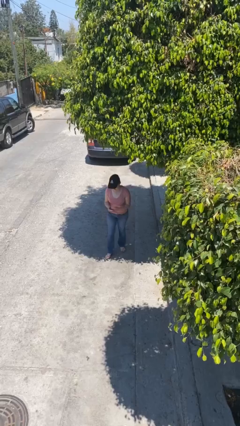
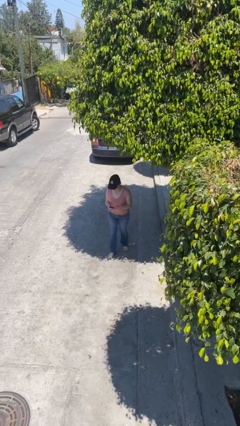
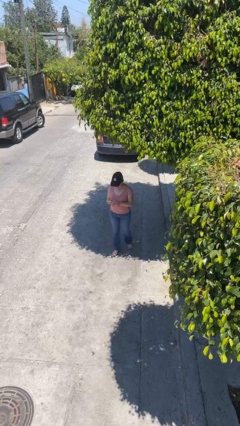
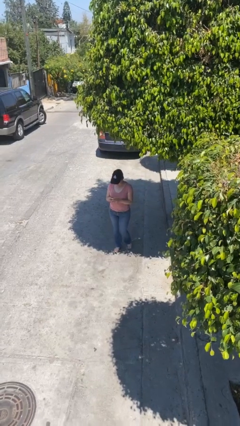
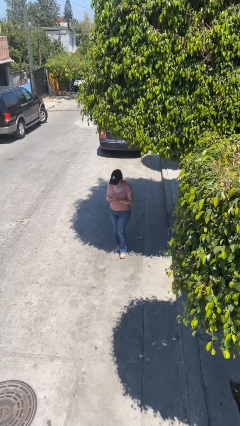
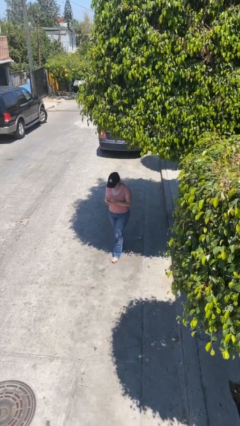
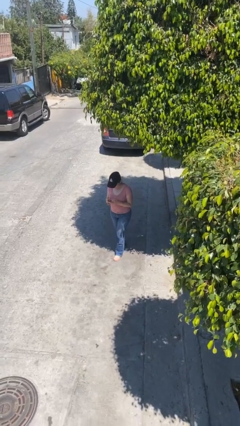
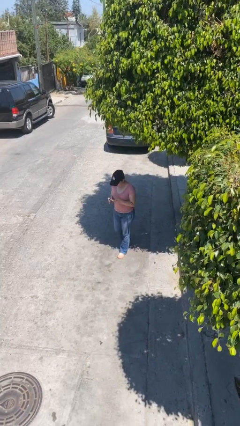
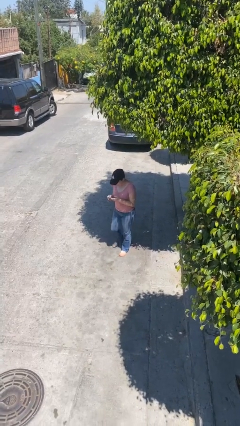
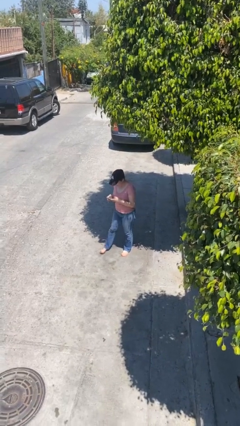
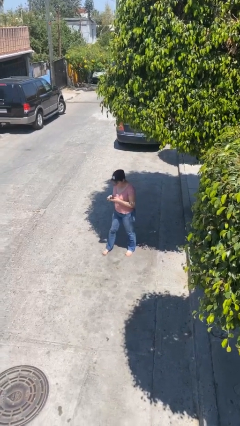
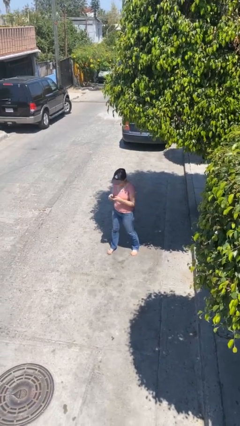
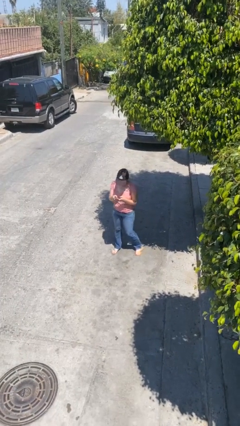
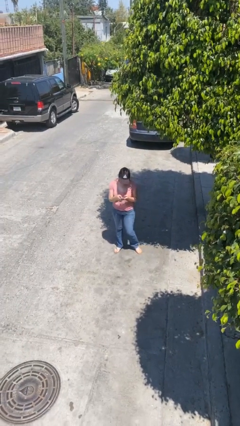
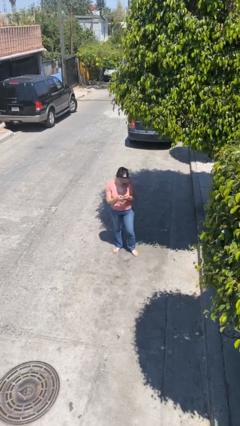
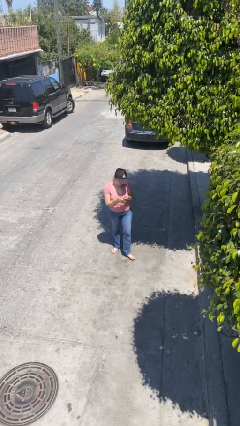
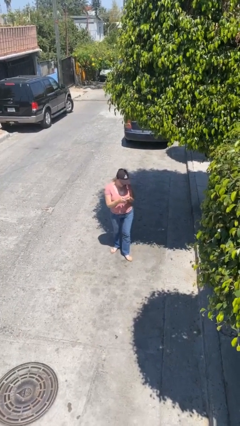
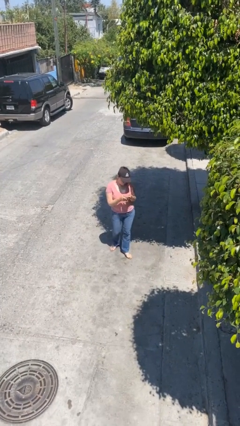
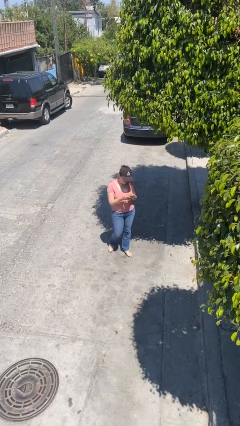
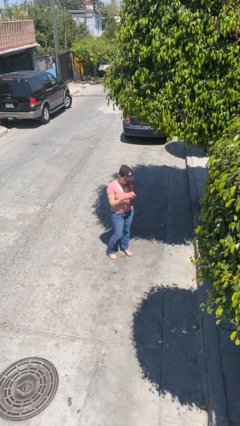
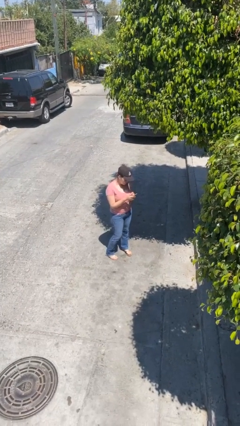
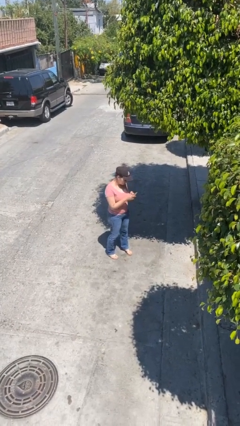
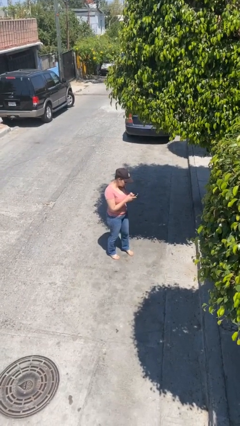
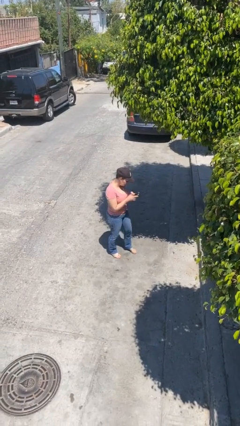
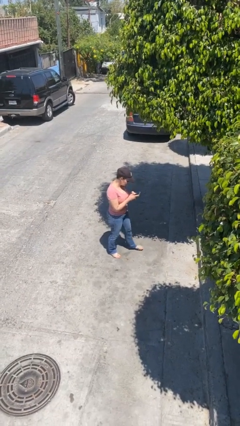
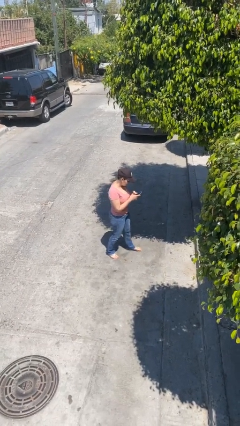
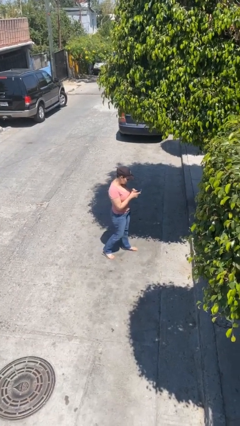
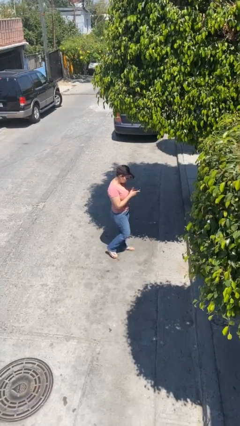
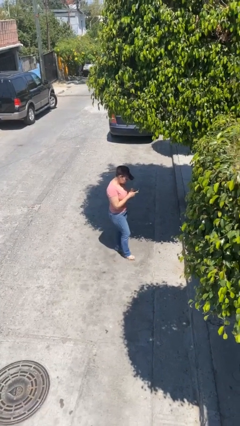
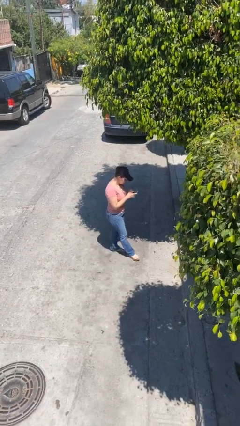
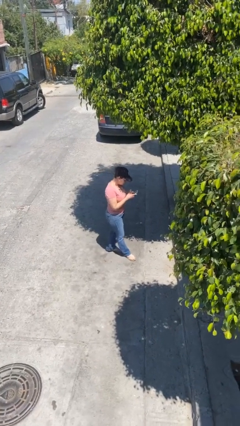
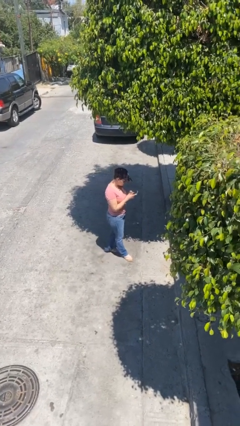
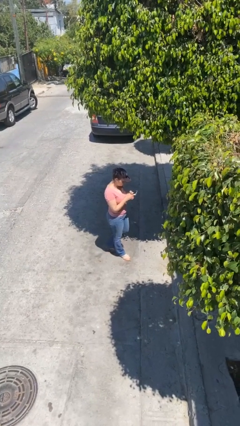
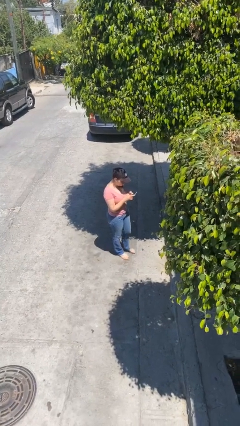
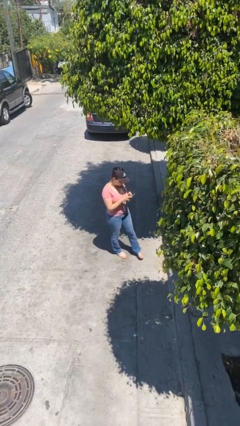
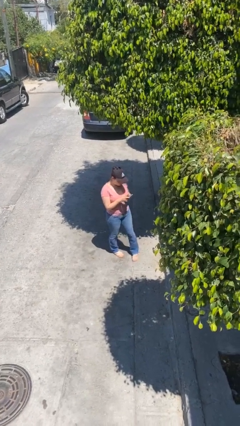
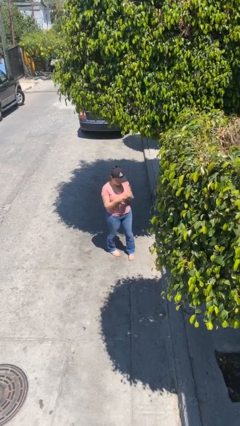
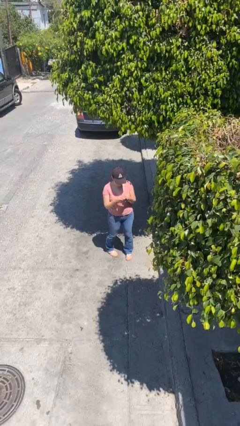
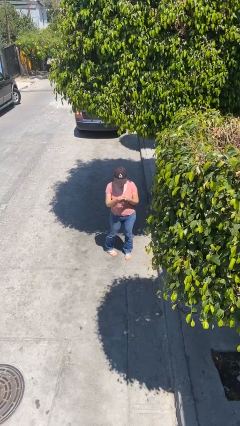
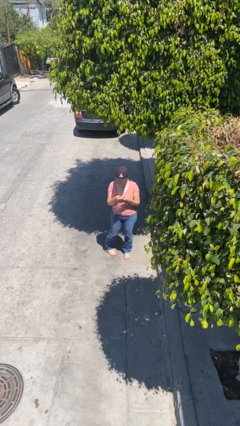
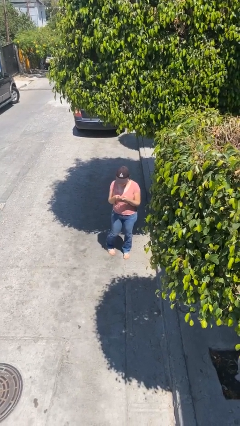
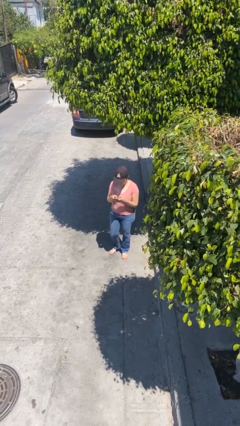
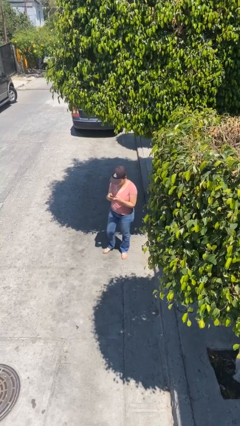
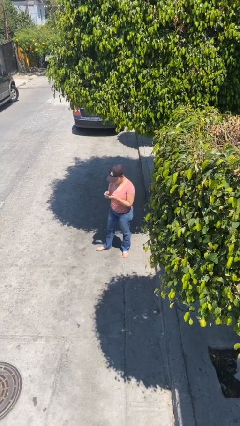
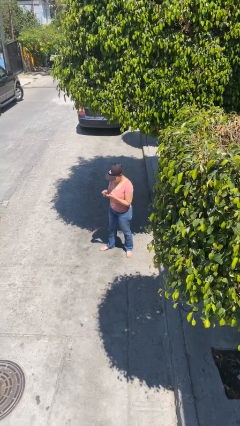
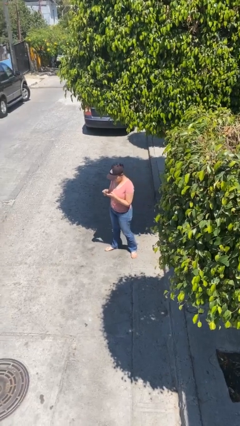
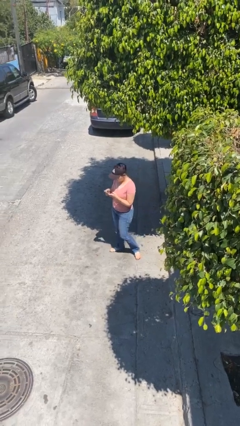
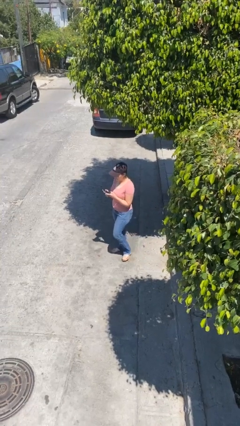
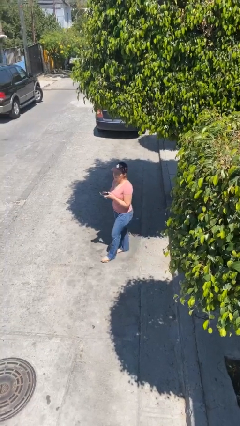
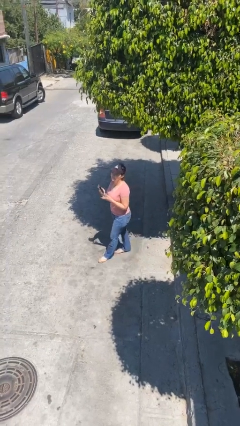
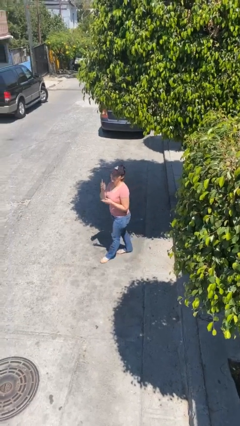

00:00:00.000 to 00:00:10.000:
person texts on phone

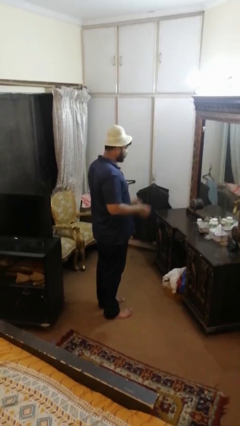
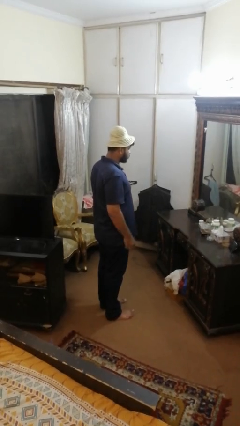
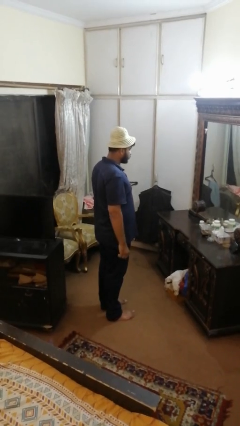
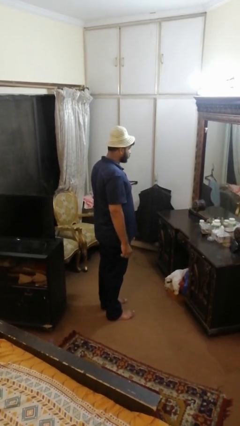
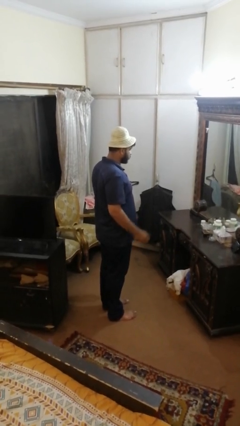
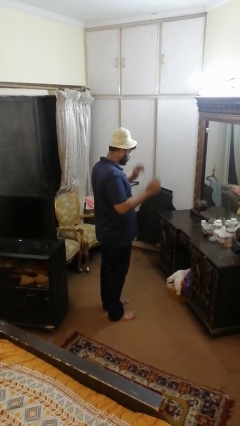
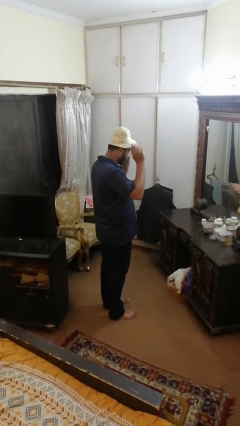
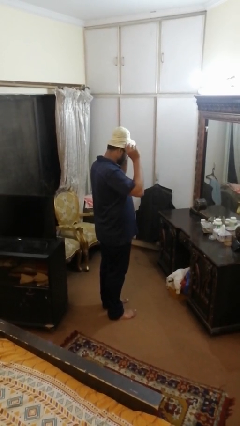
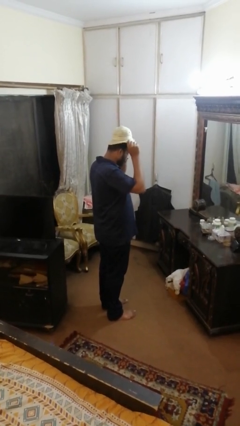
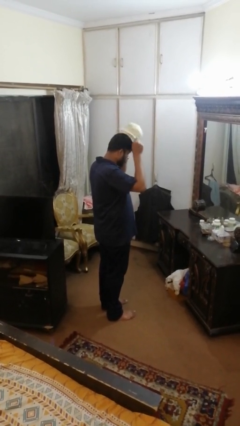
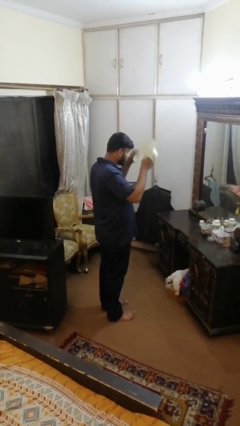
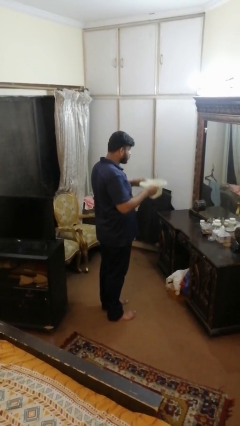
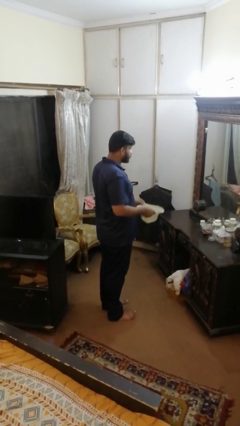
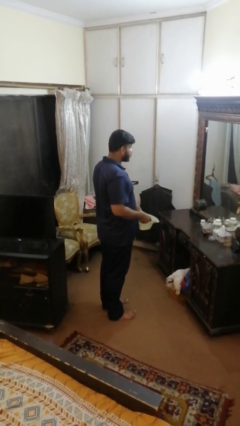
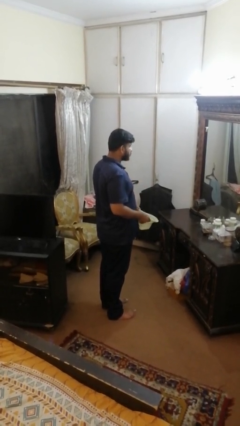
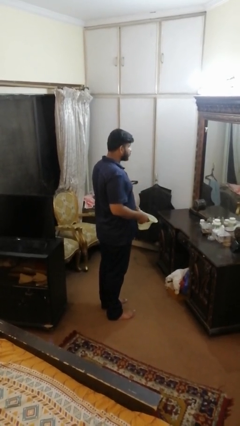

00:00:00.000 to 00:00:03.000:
person takes off hat

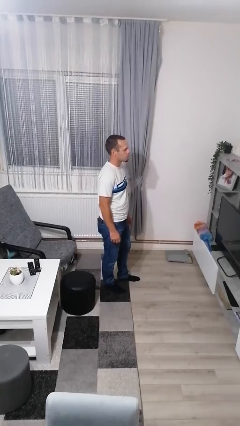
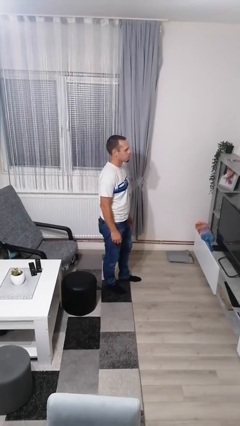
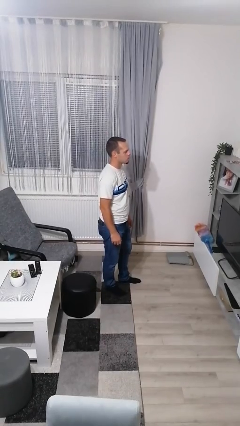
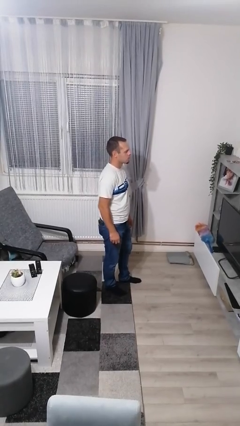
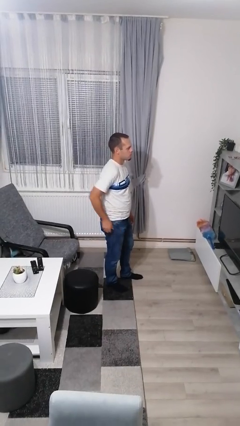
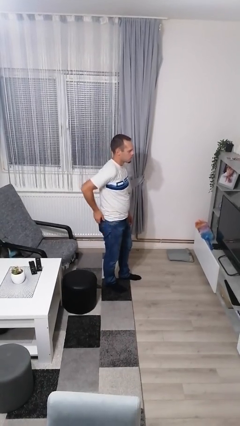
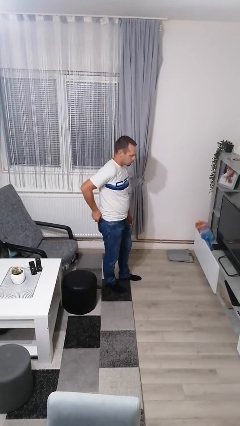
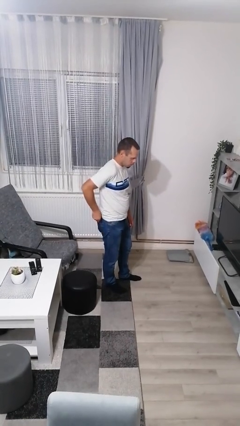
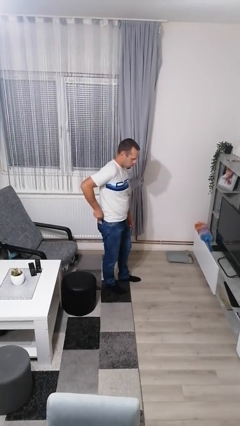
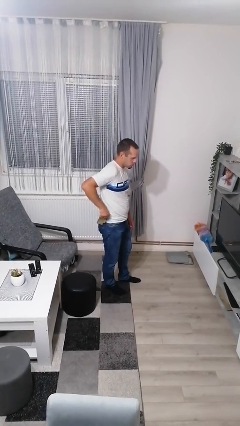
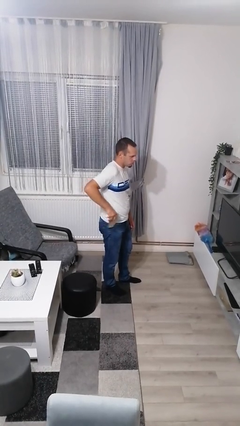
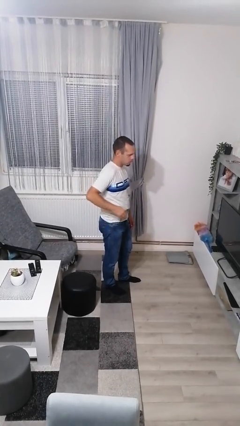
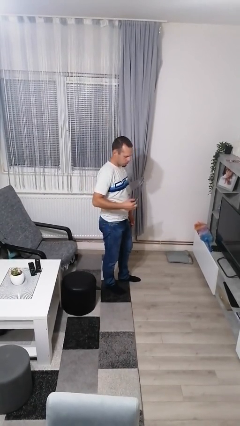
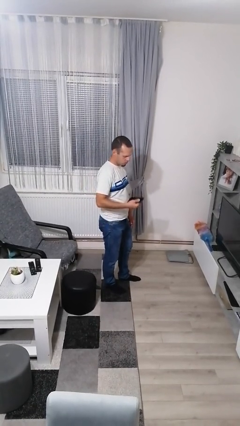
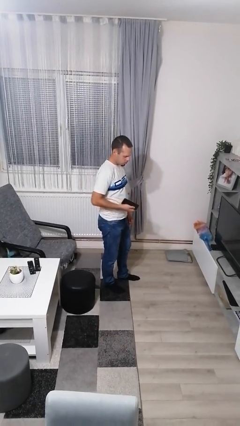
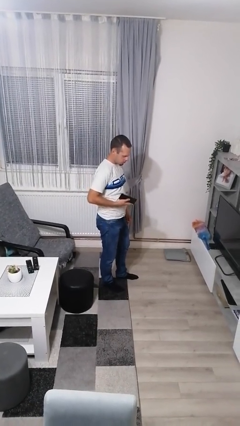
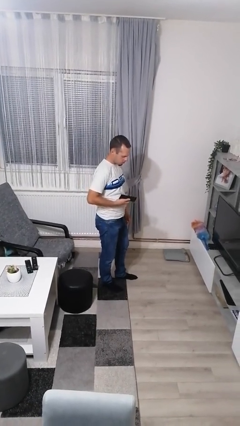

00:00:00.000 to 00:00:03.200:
person takes phone from pocket

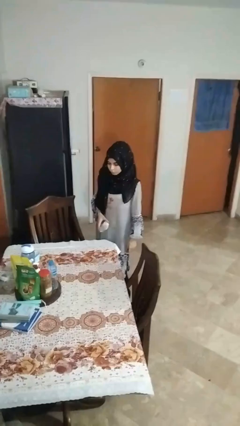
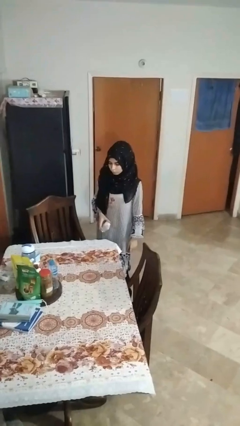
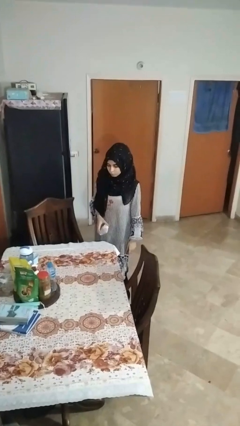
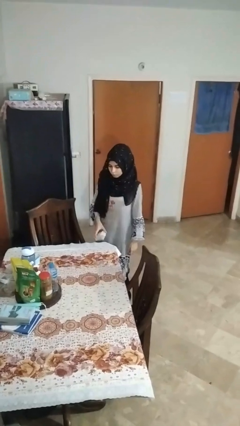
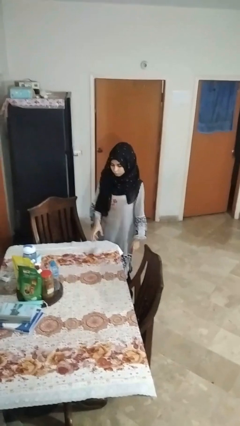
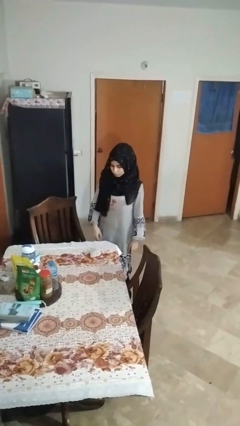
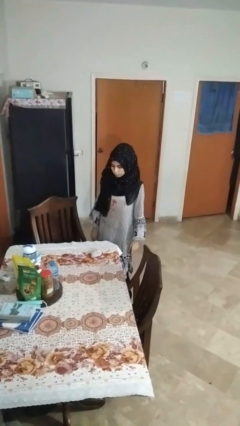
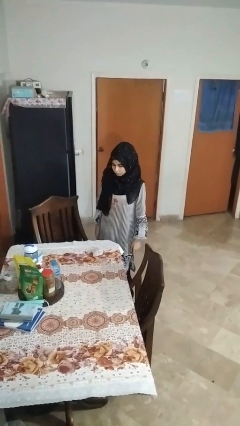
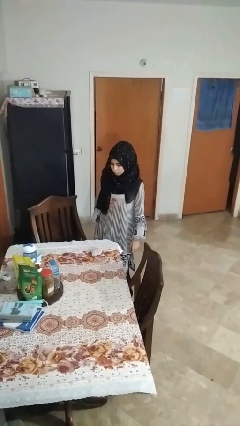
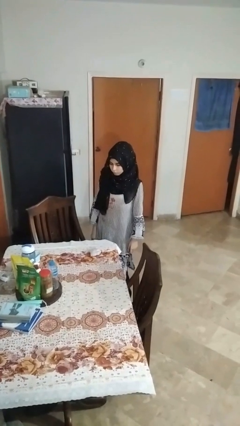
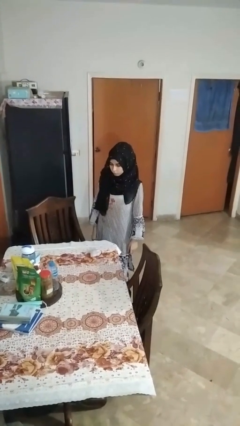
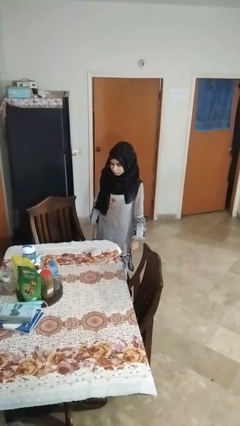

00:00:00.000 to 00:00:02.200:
person throws object on table
